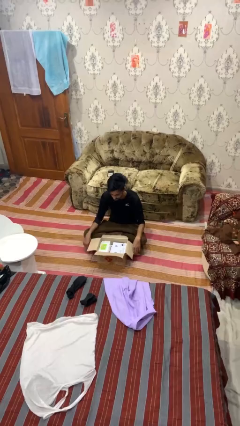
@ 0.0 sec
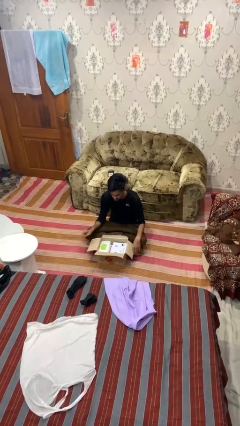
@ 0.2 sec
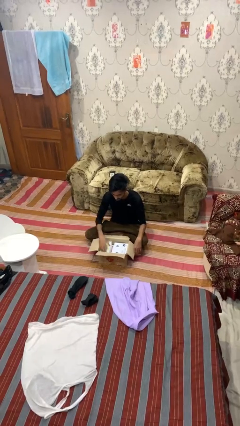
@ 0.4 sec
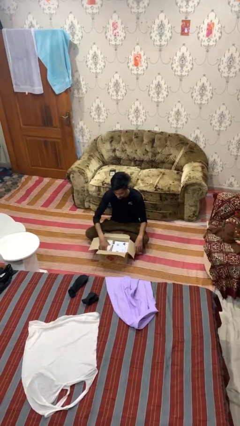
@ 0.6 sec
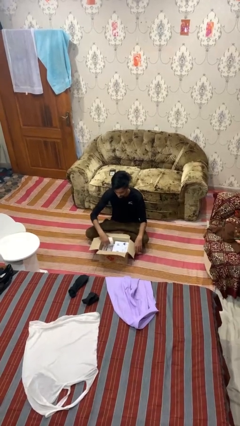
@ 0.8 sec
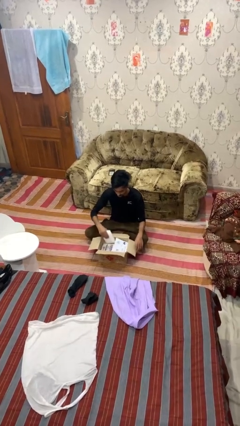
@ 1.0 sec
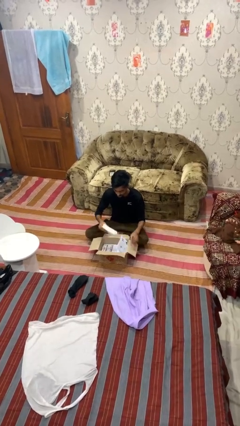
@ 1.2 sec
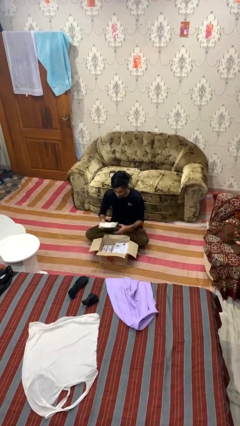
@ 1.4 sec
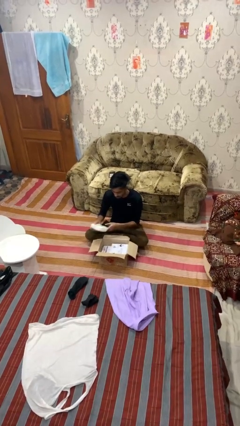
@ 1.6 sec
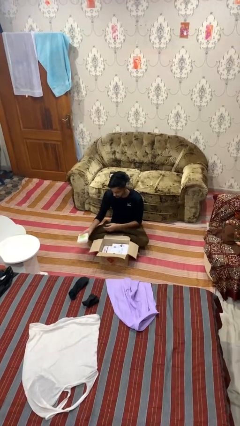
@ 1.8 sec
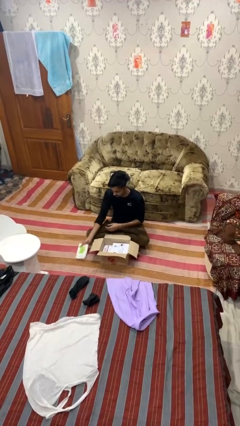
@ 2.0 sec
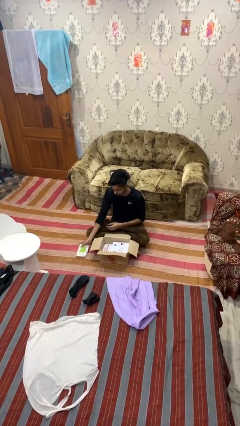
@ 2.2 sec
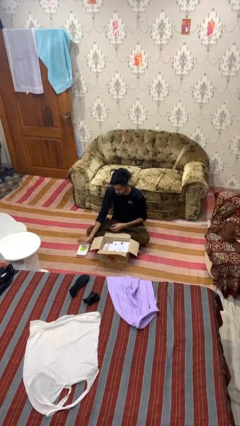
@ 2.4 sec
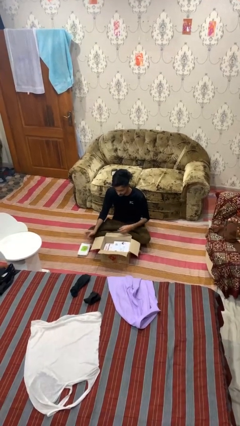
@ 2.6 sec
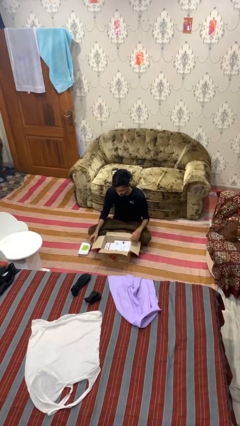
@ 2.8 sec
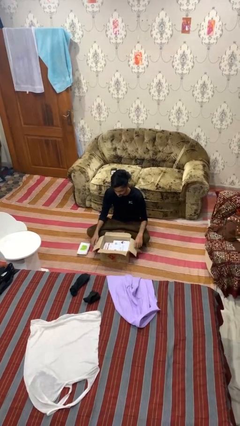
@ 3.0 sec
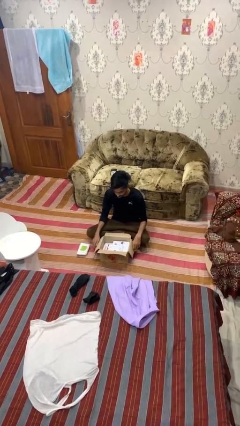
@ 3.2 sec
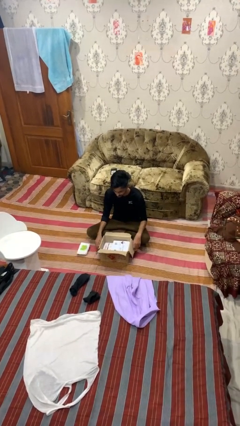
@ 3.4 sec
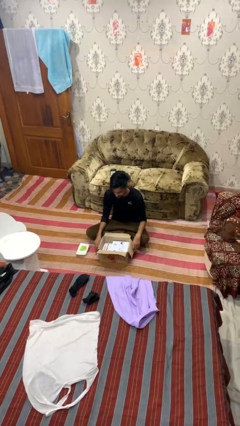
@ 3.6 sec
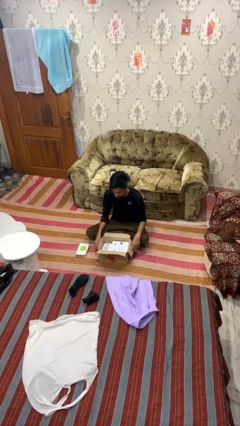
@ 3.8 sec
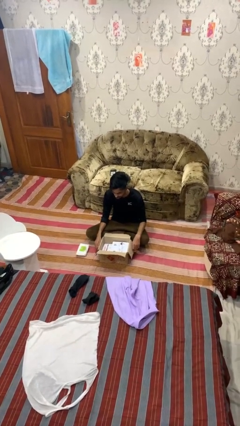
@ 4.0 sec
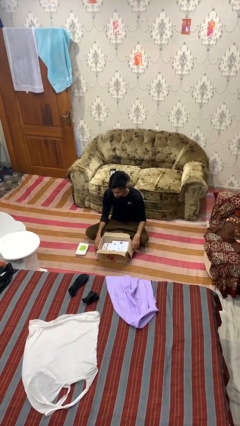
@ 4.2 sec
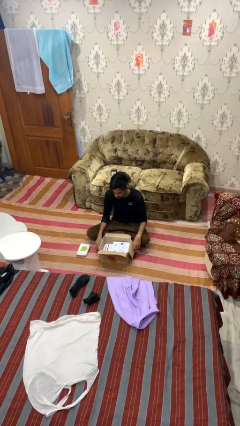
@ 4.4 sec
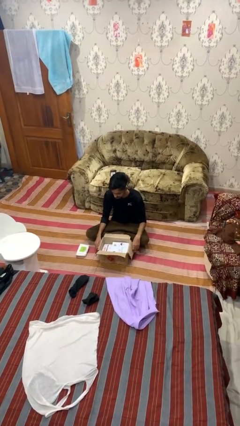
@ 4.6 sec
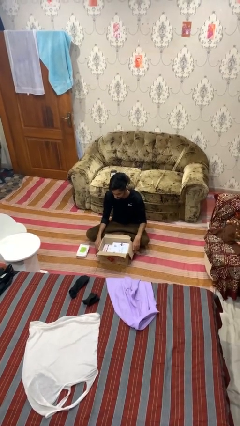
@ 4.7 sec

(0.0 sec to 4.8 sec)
person takes object from box

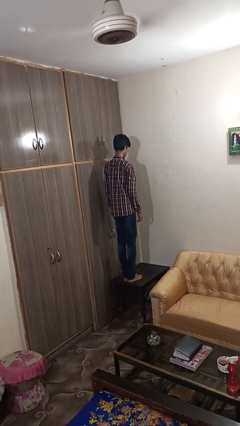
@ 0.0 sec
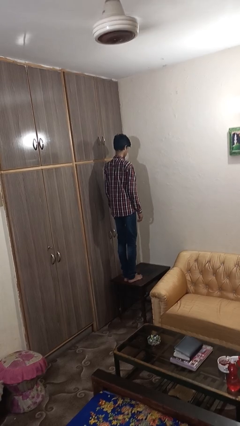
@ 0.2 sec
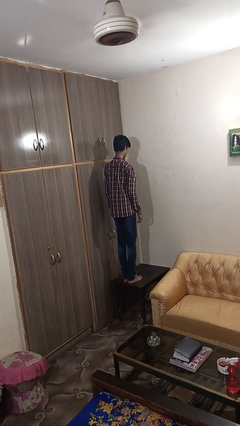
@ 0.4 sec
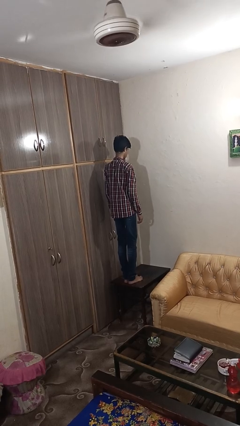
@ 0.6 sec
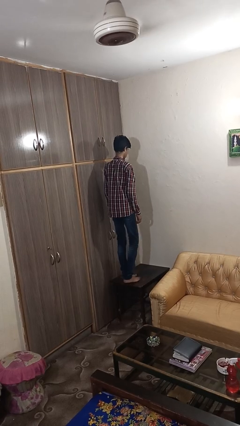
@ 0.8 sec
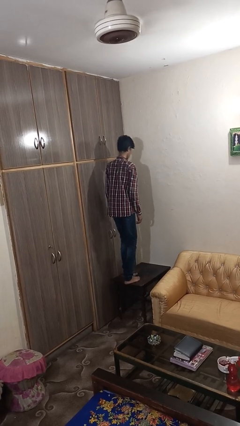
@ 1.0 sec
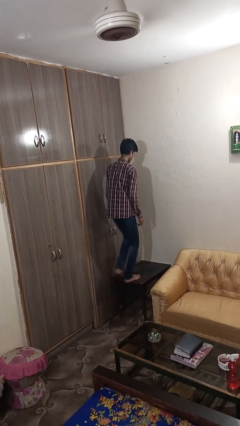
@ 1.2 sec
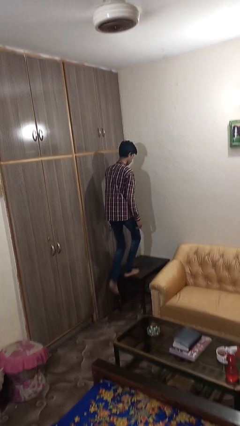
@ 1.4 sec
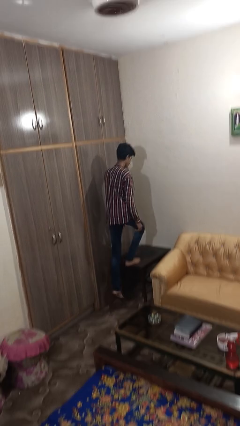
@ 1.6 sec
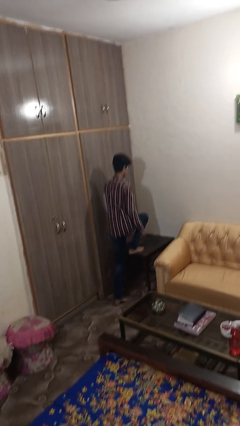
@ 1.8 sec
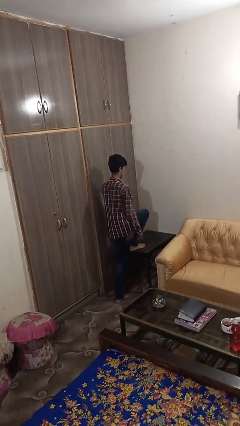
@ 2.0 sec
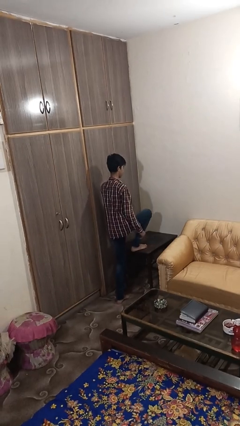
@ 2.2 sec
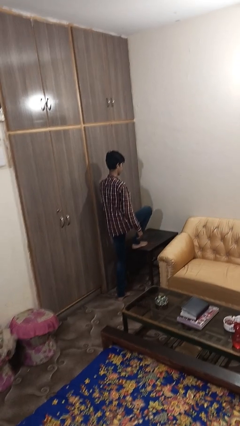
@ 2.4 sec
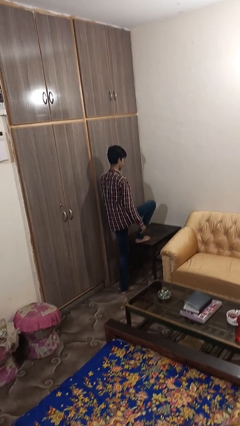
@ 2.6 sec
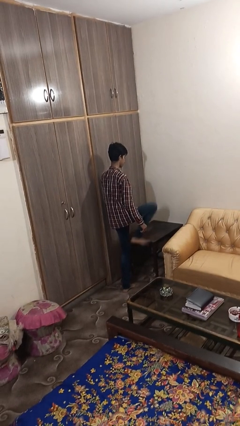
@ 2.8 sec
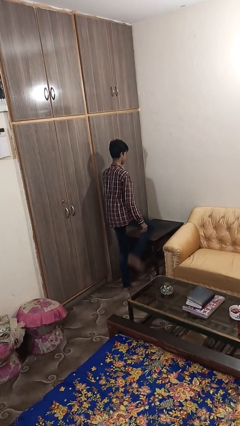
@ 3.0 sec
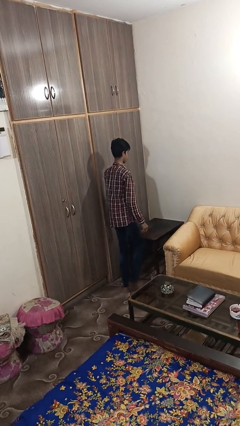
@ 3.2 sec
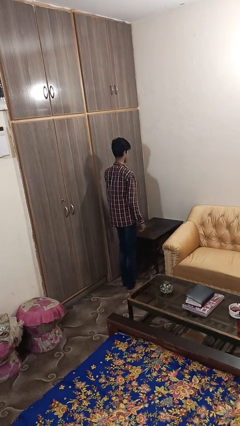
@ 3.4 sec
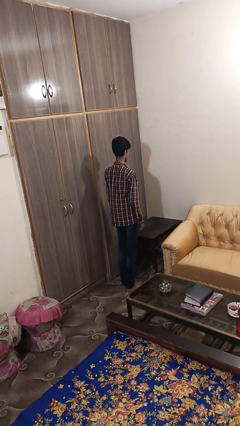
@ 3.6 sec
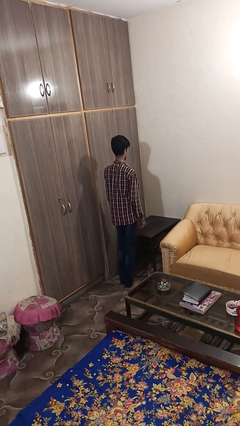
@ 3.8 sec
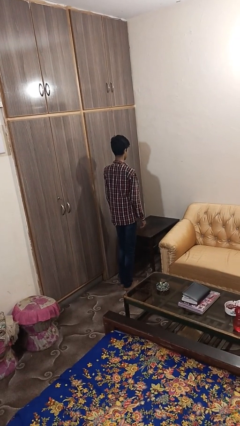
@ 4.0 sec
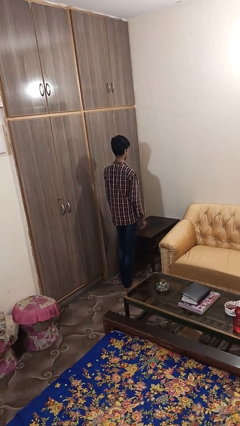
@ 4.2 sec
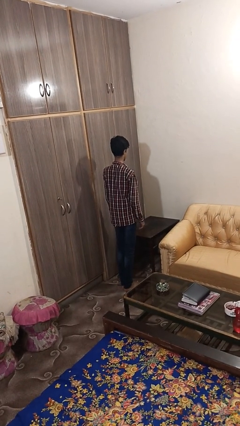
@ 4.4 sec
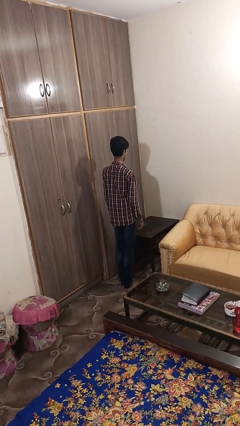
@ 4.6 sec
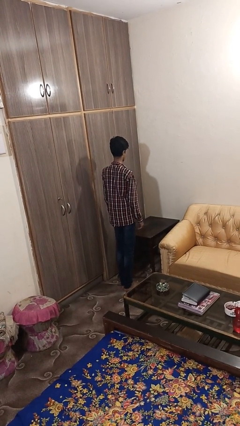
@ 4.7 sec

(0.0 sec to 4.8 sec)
person climbs off table

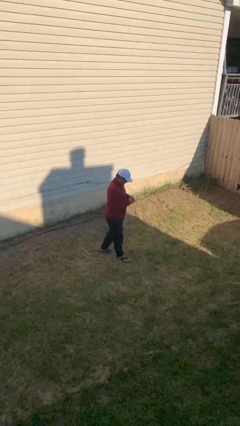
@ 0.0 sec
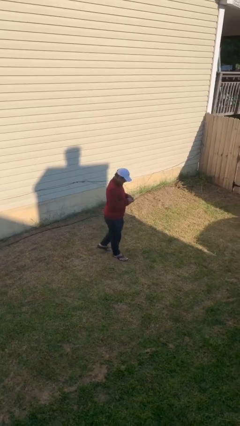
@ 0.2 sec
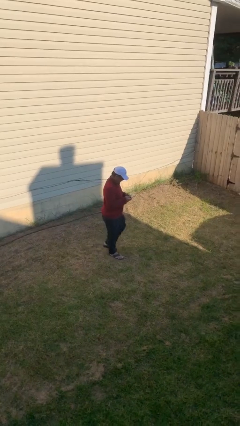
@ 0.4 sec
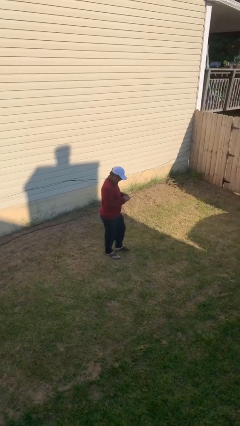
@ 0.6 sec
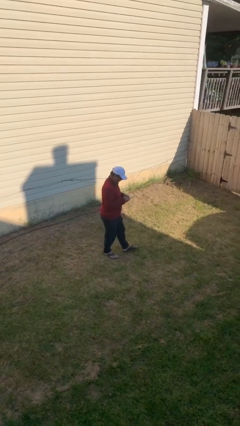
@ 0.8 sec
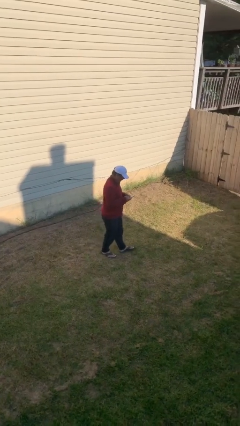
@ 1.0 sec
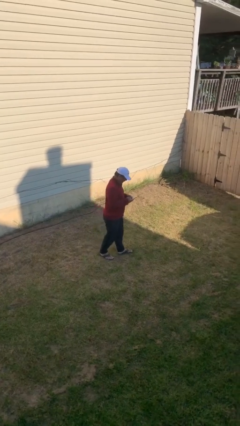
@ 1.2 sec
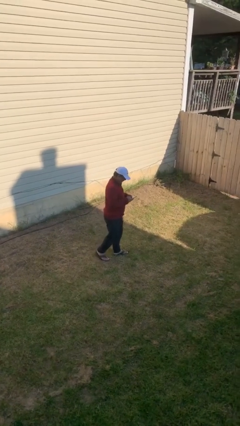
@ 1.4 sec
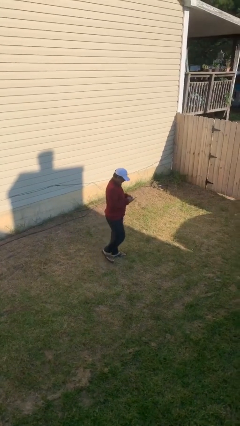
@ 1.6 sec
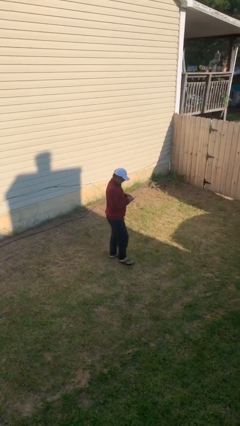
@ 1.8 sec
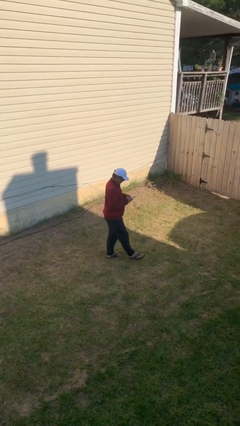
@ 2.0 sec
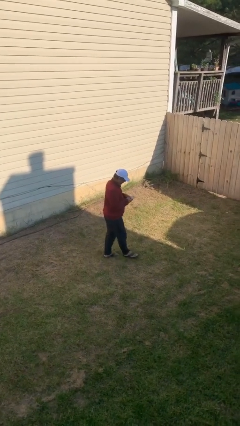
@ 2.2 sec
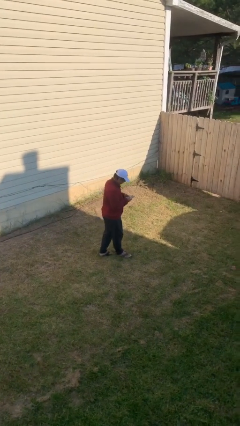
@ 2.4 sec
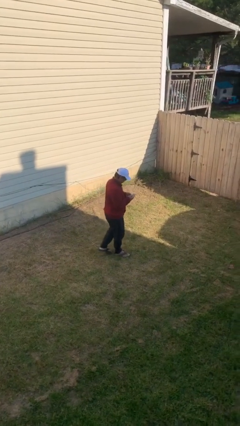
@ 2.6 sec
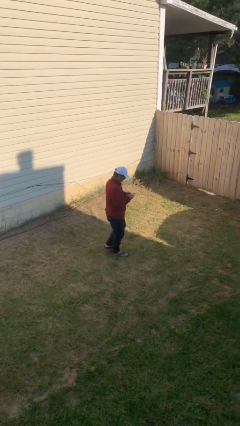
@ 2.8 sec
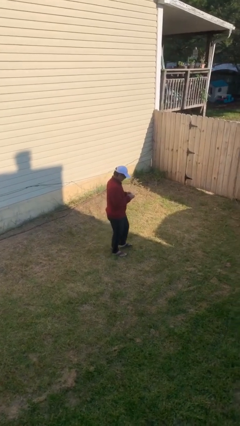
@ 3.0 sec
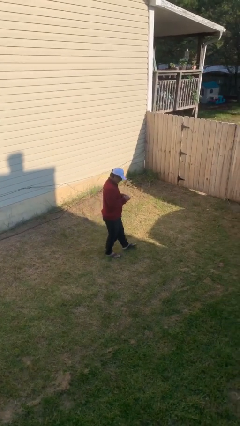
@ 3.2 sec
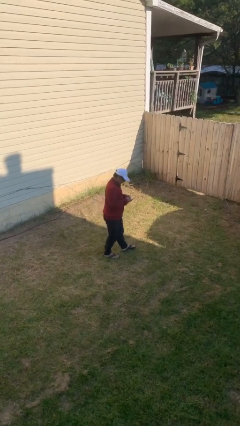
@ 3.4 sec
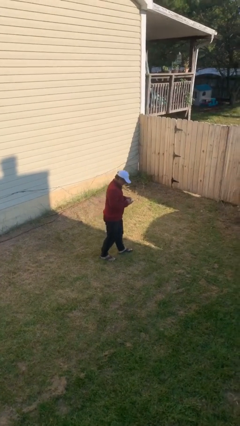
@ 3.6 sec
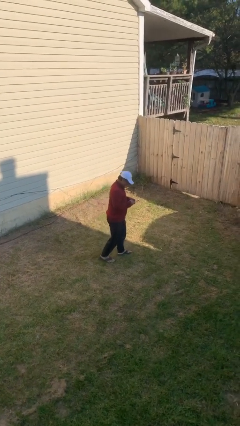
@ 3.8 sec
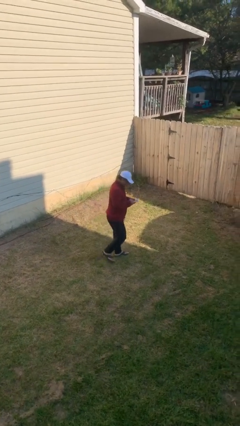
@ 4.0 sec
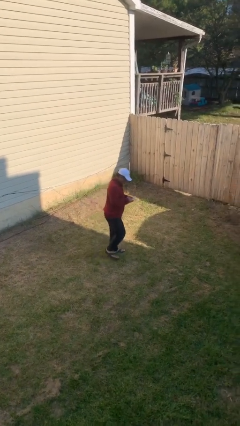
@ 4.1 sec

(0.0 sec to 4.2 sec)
person texts on phone

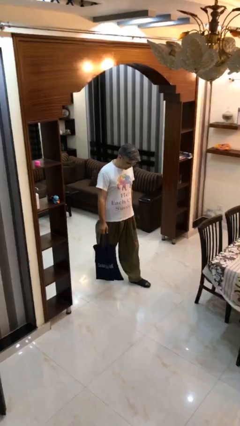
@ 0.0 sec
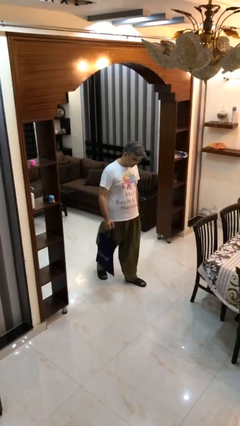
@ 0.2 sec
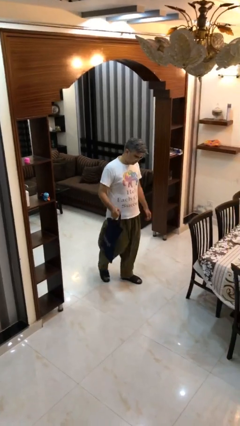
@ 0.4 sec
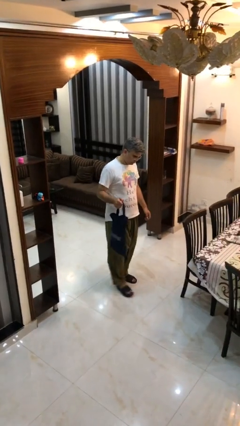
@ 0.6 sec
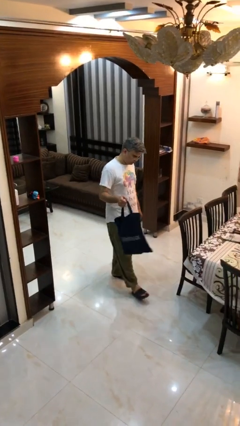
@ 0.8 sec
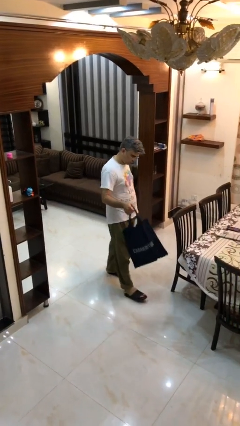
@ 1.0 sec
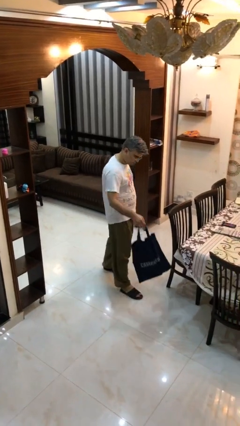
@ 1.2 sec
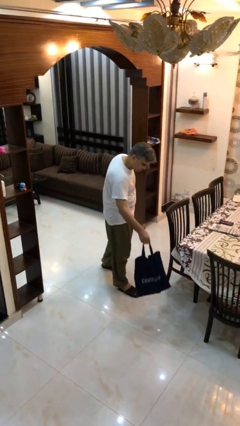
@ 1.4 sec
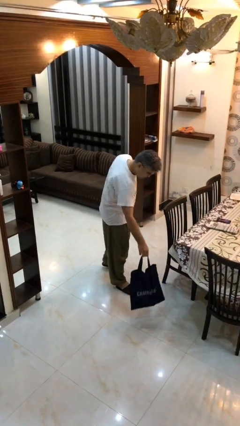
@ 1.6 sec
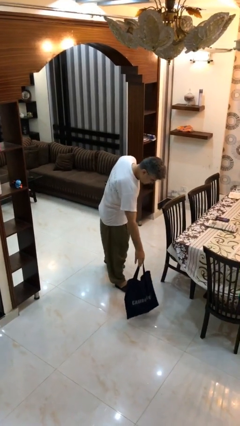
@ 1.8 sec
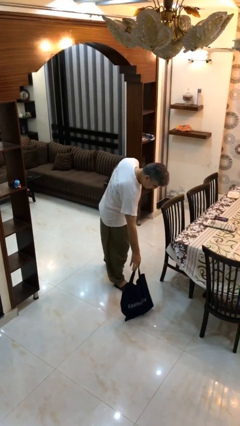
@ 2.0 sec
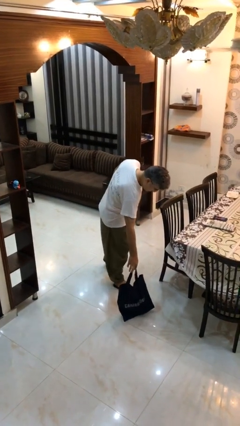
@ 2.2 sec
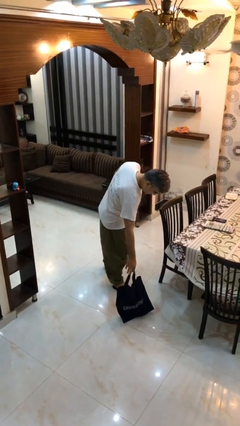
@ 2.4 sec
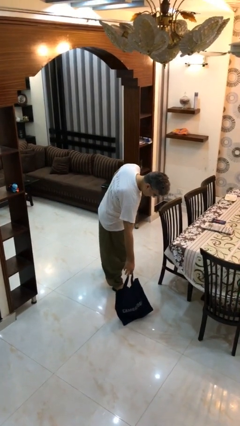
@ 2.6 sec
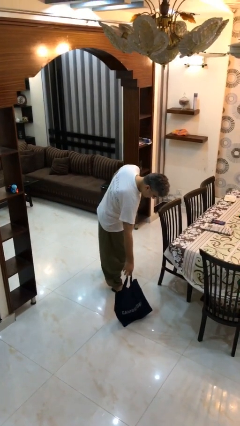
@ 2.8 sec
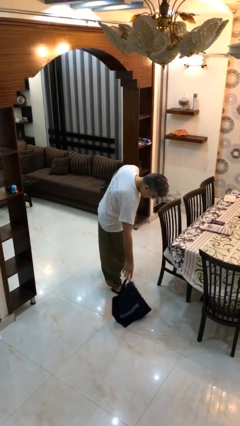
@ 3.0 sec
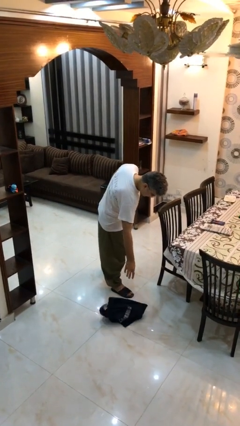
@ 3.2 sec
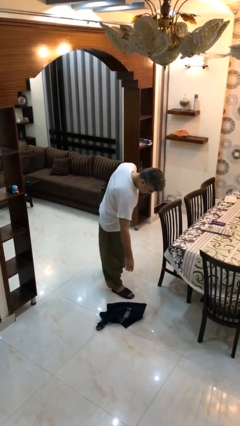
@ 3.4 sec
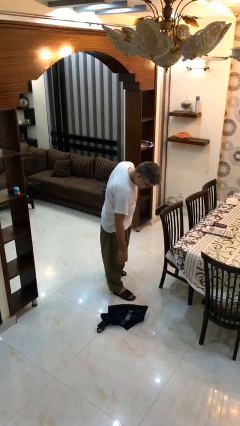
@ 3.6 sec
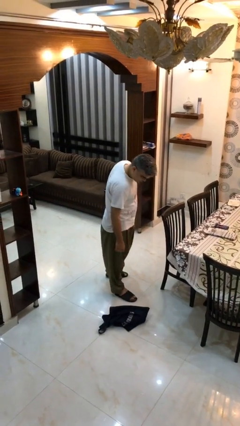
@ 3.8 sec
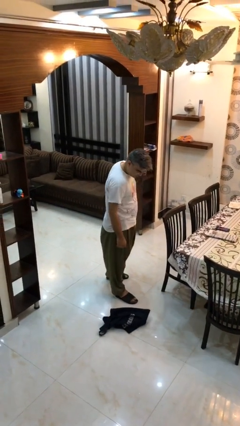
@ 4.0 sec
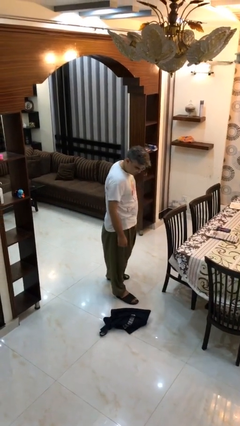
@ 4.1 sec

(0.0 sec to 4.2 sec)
person puts down object on floor
